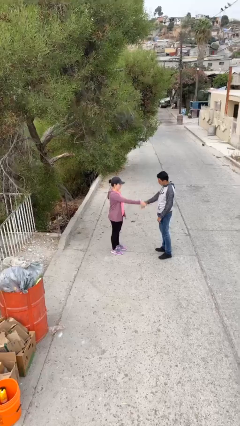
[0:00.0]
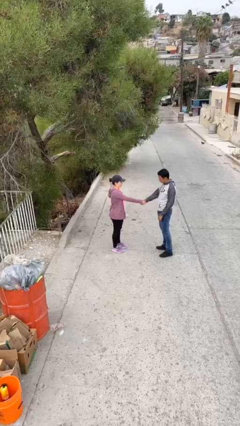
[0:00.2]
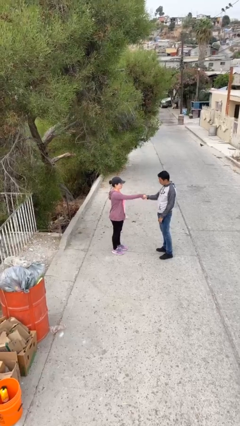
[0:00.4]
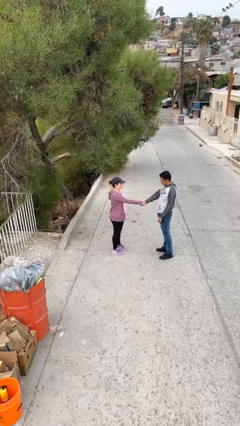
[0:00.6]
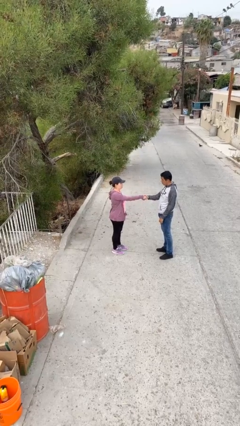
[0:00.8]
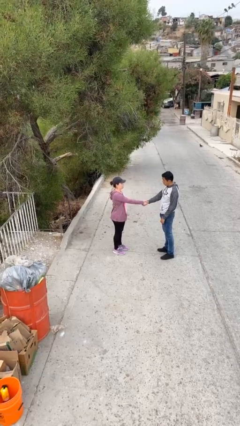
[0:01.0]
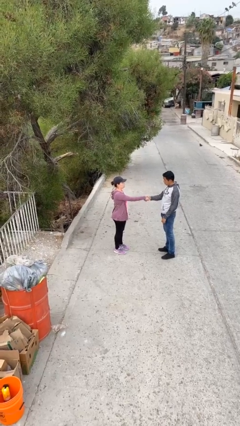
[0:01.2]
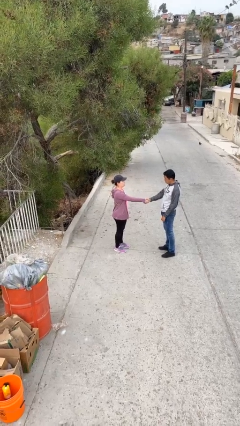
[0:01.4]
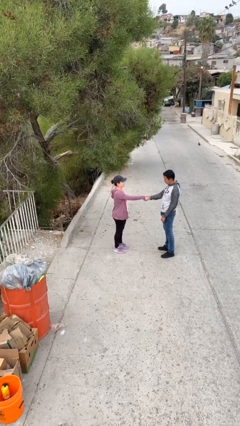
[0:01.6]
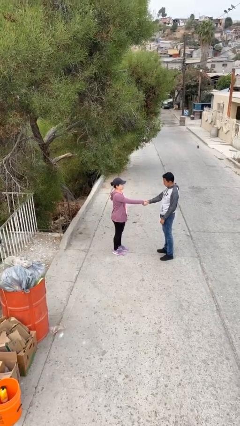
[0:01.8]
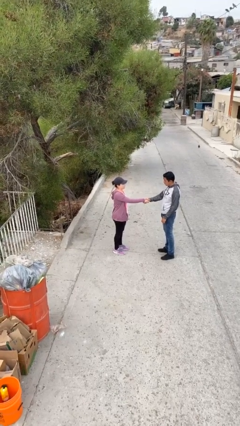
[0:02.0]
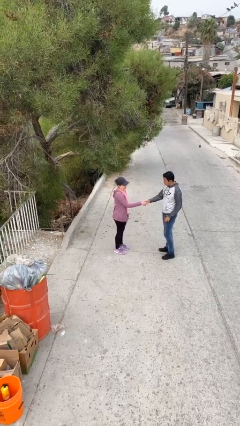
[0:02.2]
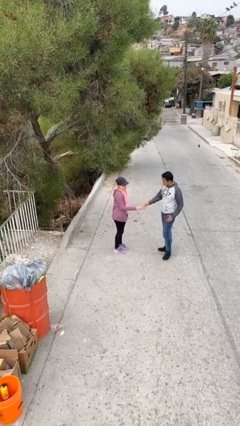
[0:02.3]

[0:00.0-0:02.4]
person shakes hand

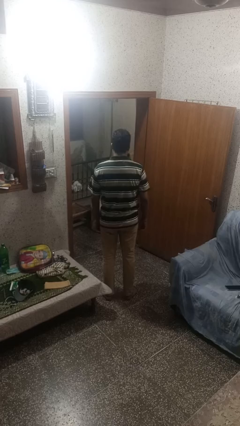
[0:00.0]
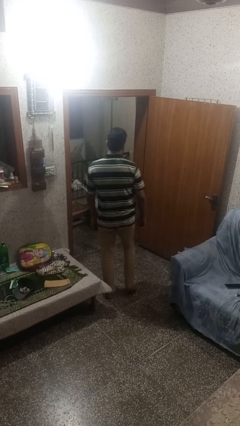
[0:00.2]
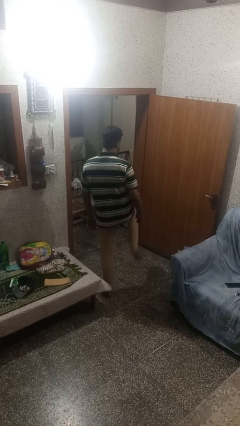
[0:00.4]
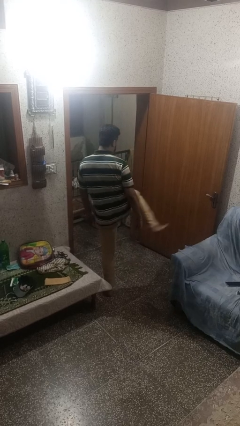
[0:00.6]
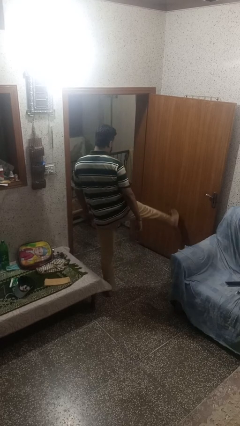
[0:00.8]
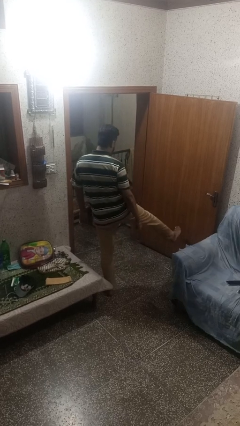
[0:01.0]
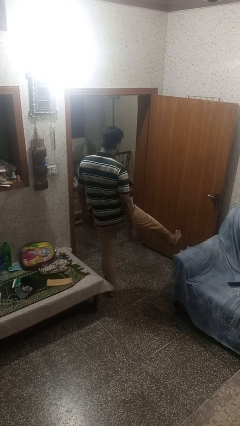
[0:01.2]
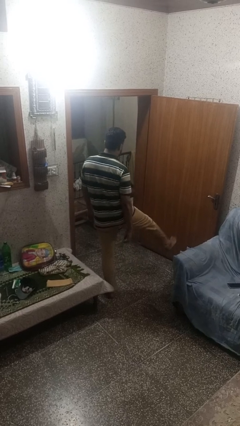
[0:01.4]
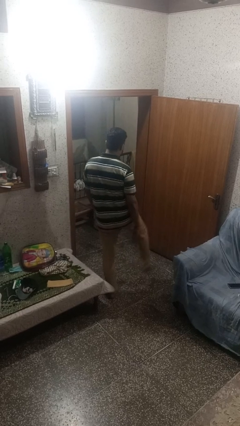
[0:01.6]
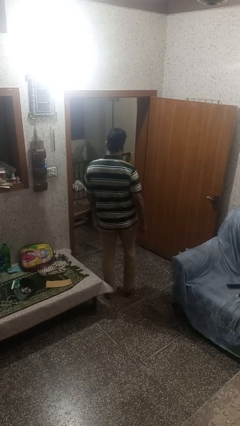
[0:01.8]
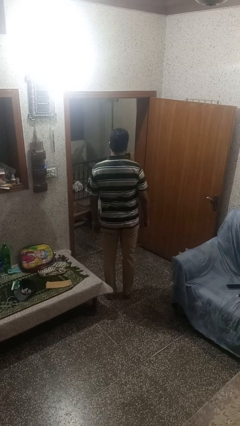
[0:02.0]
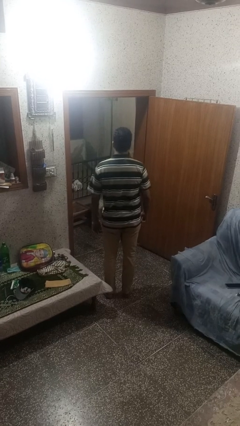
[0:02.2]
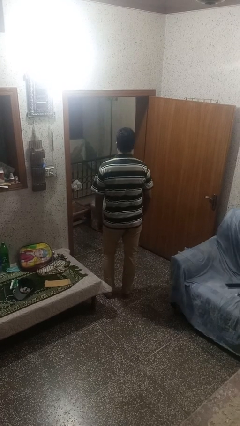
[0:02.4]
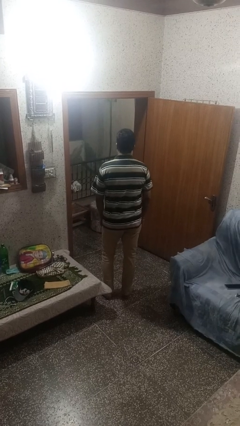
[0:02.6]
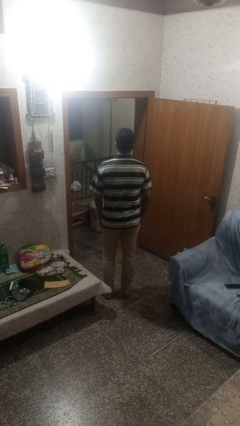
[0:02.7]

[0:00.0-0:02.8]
person karate kicks

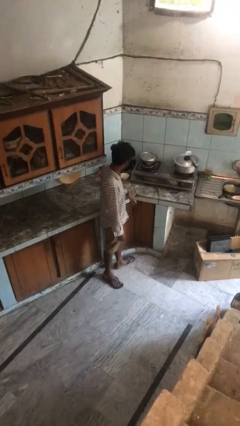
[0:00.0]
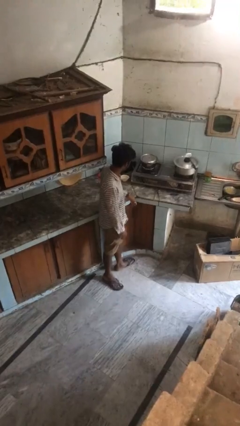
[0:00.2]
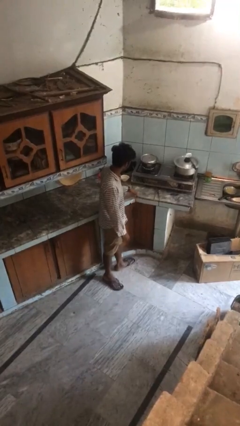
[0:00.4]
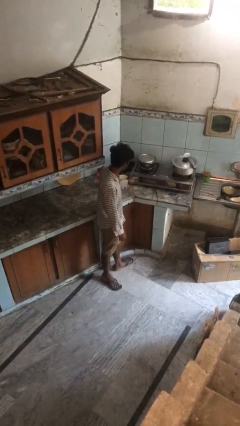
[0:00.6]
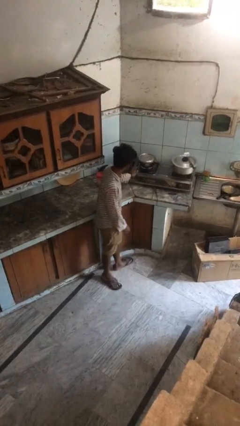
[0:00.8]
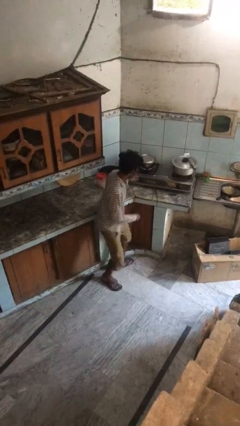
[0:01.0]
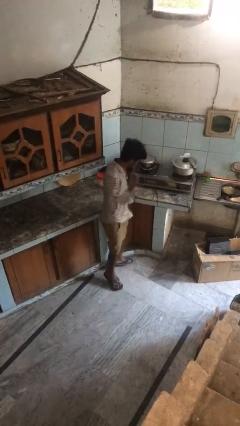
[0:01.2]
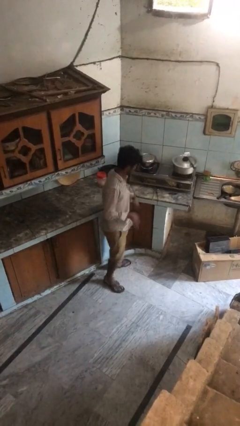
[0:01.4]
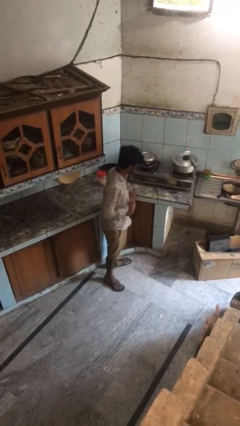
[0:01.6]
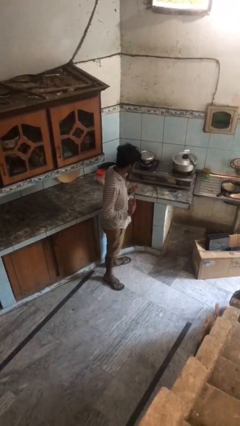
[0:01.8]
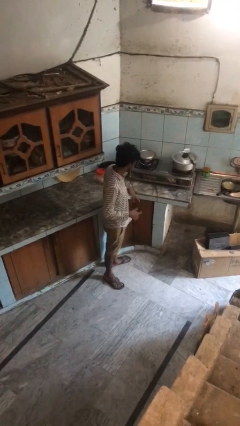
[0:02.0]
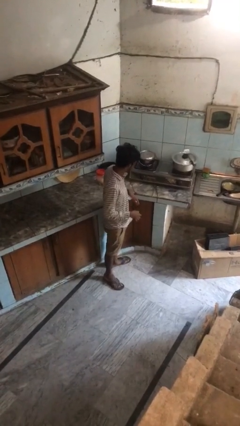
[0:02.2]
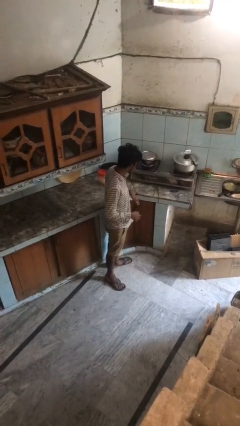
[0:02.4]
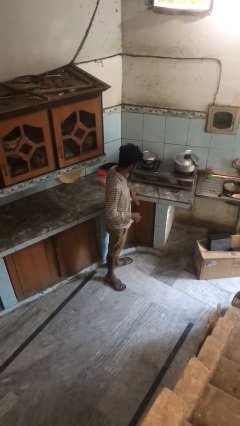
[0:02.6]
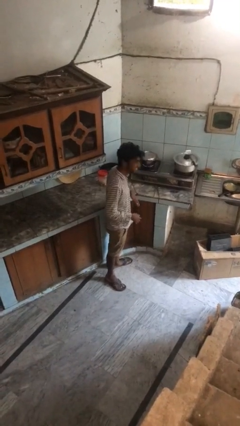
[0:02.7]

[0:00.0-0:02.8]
person burns hand

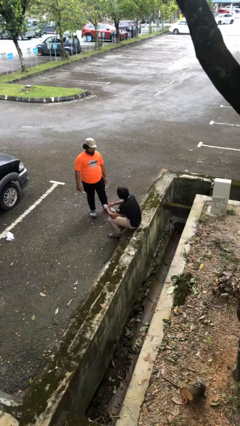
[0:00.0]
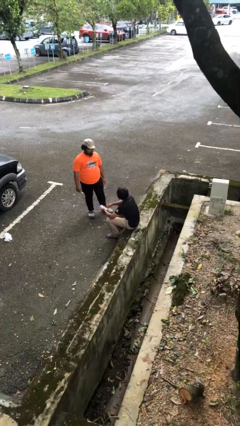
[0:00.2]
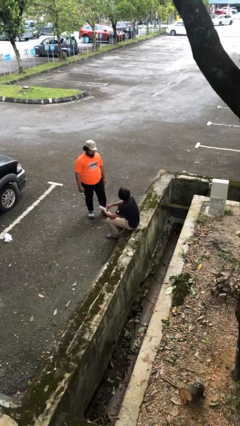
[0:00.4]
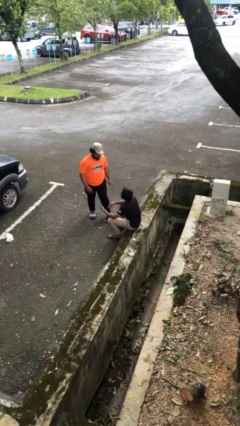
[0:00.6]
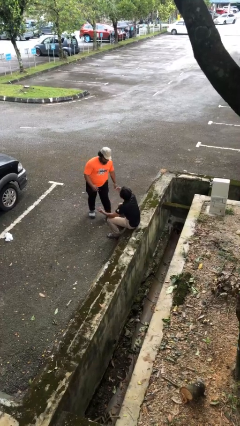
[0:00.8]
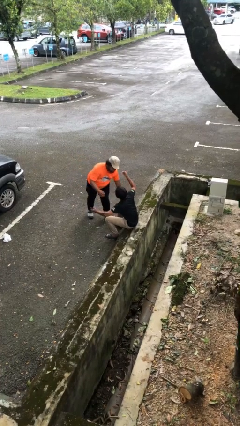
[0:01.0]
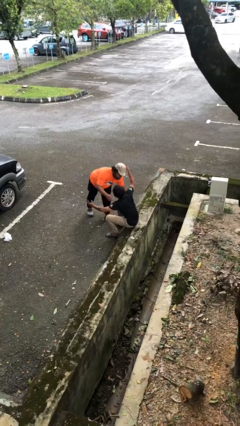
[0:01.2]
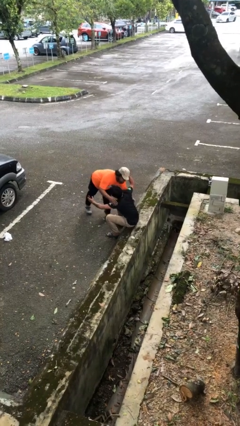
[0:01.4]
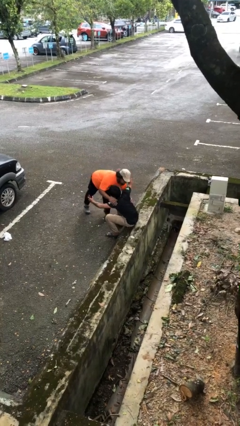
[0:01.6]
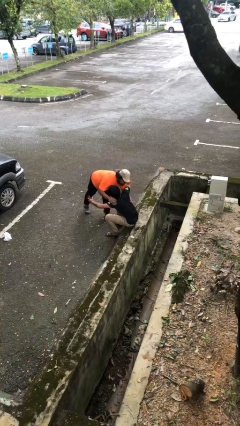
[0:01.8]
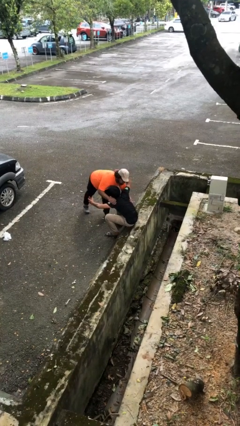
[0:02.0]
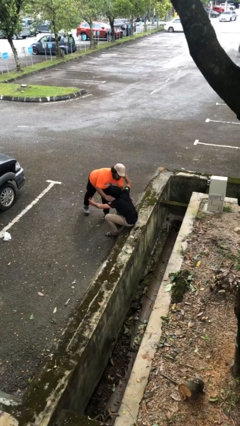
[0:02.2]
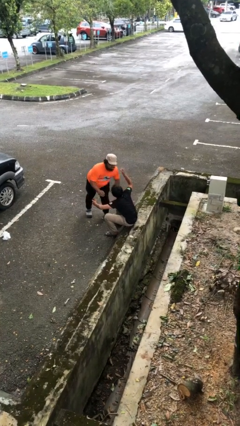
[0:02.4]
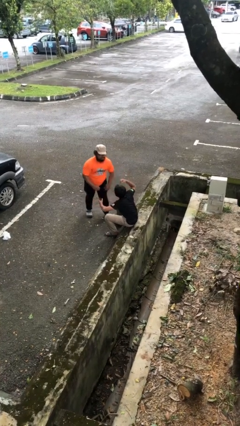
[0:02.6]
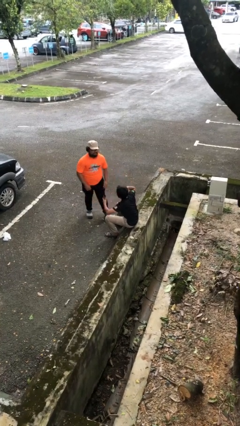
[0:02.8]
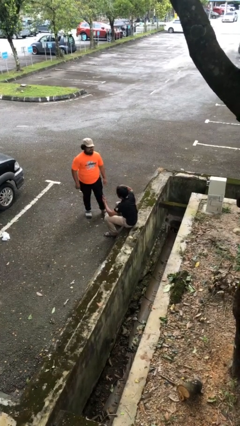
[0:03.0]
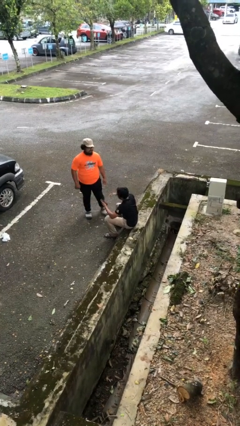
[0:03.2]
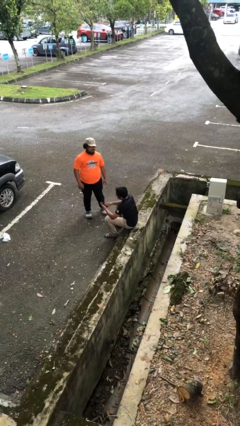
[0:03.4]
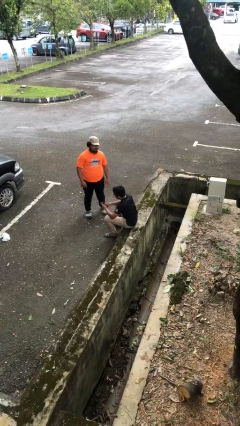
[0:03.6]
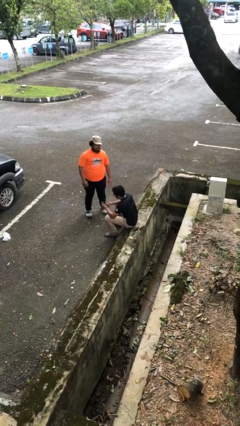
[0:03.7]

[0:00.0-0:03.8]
person embraces person

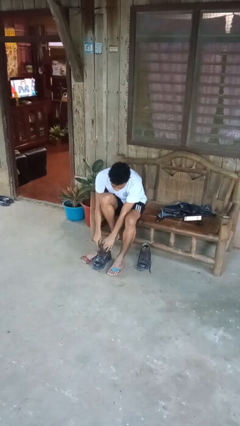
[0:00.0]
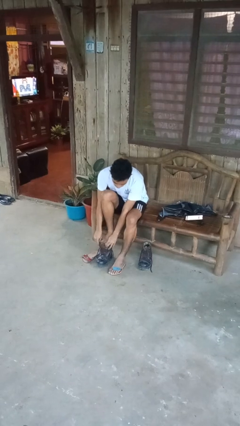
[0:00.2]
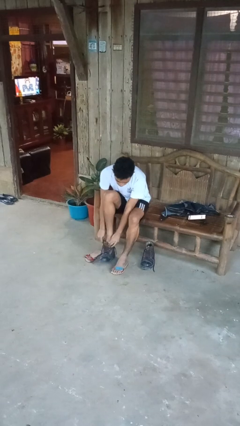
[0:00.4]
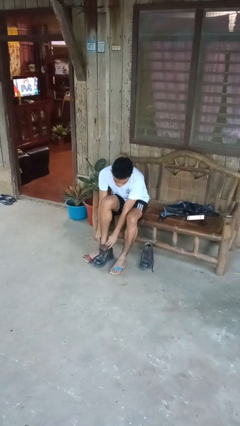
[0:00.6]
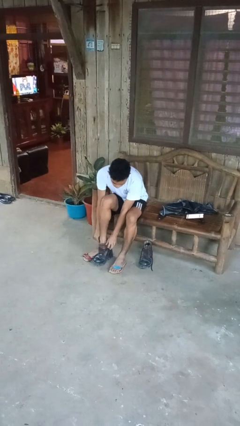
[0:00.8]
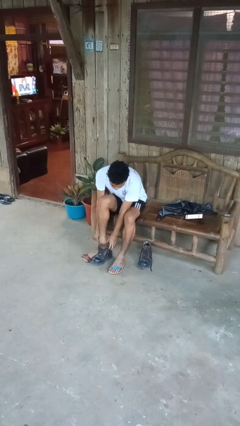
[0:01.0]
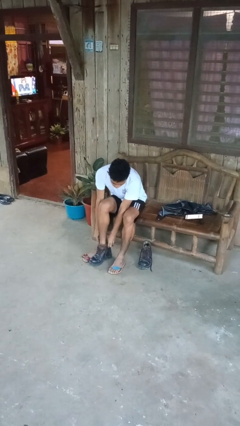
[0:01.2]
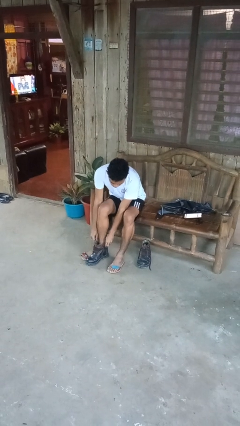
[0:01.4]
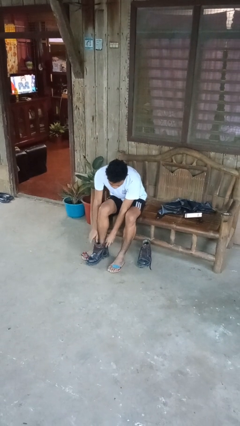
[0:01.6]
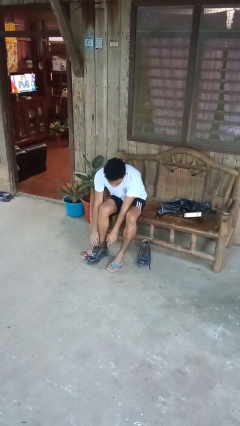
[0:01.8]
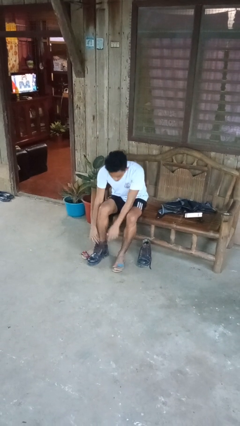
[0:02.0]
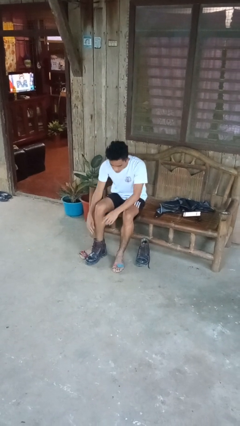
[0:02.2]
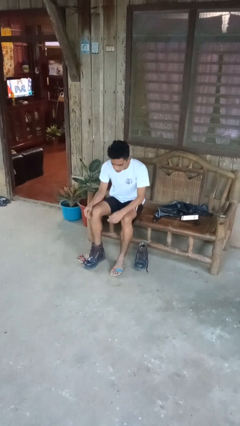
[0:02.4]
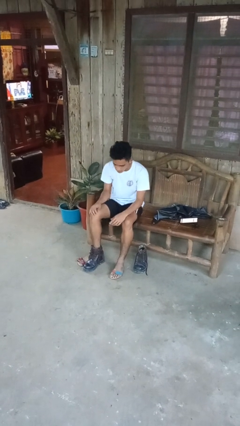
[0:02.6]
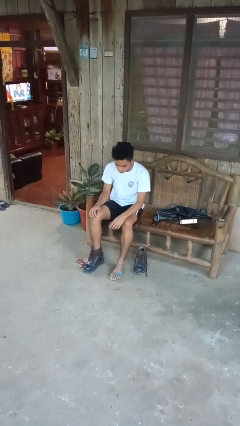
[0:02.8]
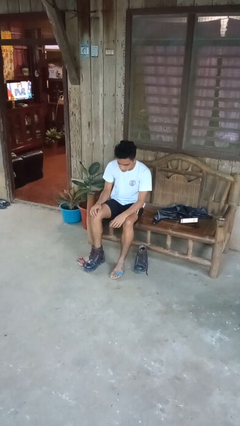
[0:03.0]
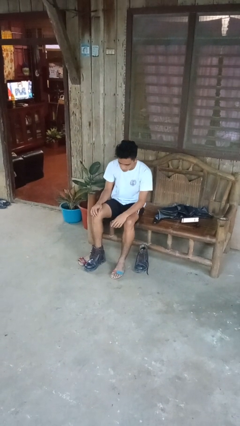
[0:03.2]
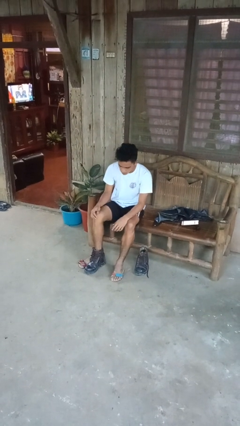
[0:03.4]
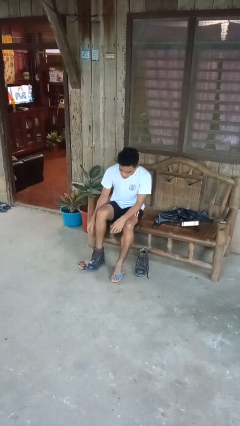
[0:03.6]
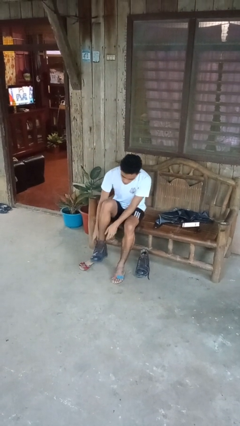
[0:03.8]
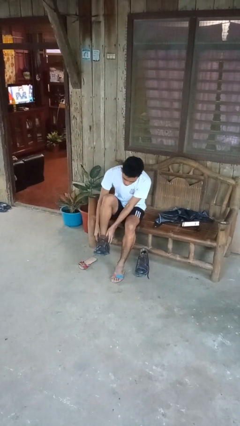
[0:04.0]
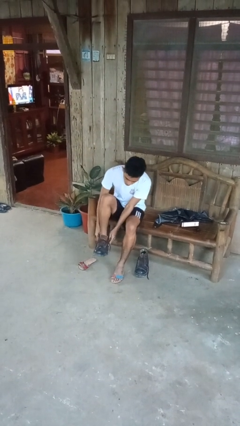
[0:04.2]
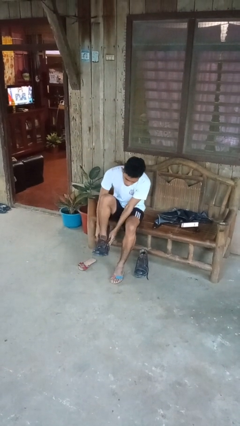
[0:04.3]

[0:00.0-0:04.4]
person puts on boots

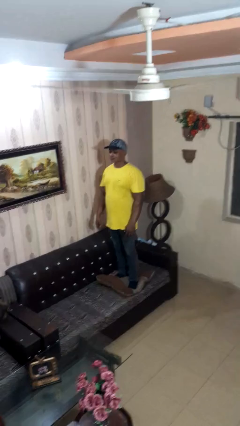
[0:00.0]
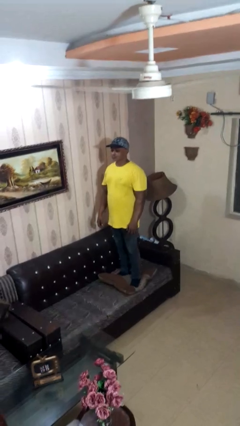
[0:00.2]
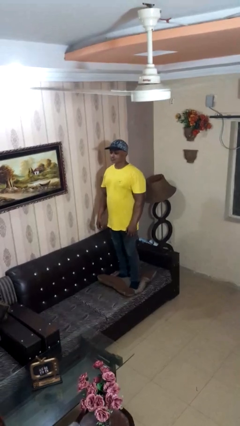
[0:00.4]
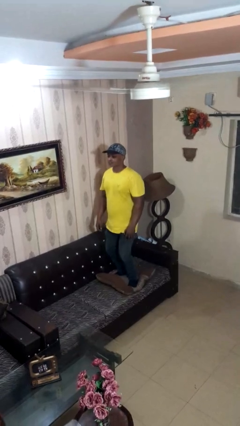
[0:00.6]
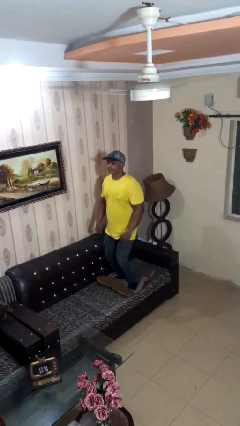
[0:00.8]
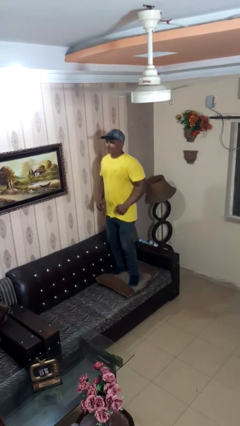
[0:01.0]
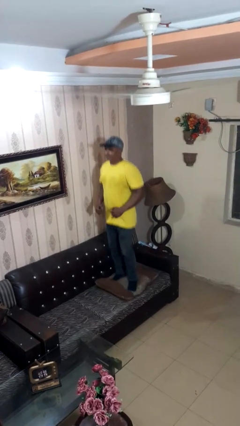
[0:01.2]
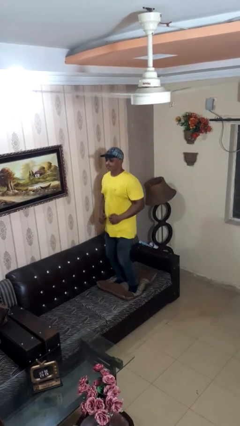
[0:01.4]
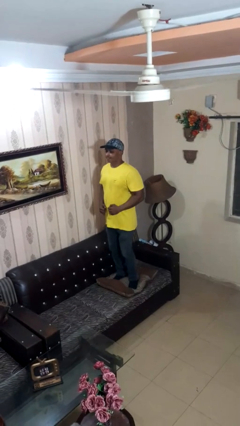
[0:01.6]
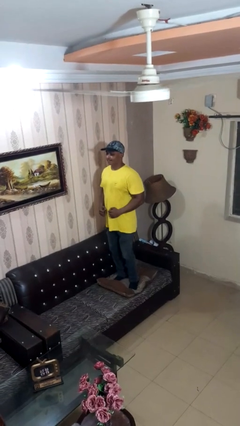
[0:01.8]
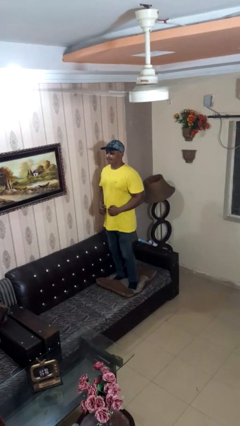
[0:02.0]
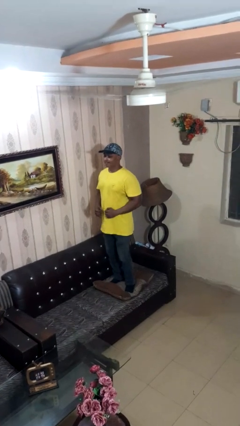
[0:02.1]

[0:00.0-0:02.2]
person jumps on couch
